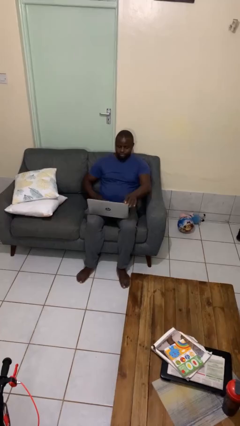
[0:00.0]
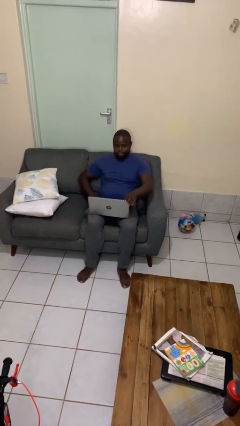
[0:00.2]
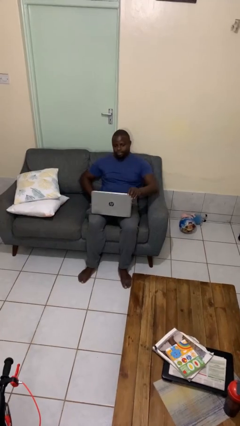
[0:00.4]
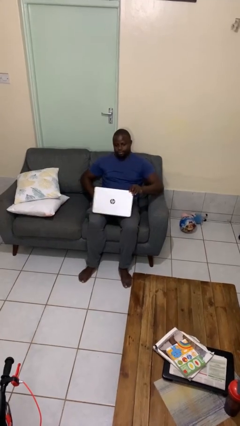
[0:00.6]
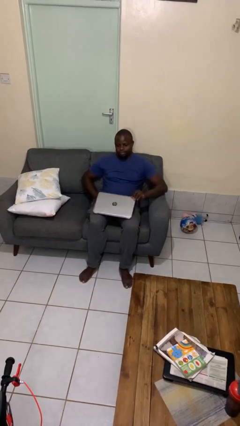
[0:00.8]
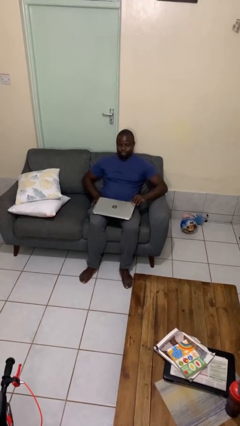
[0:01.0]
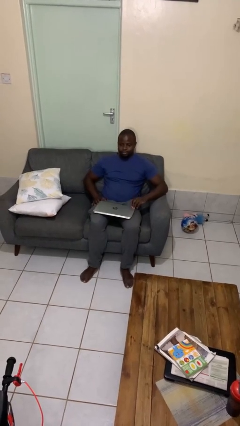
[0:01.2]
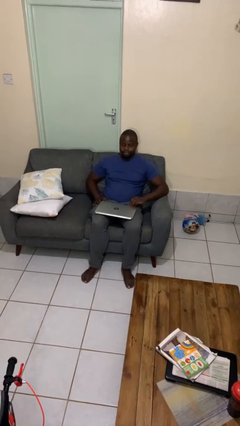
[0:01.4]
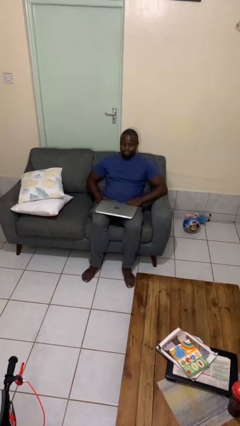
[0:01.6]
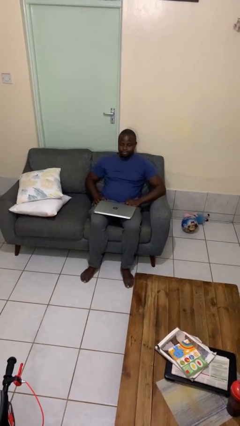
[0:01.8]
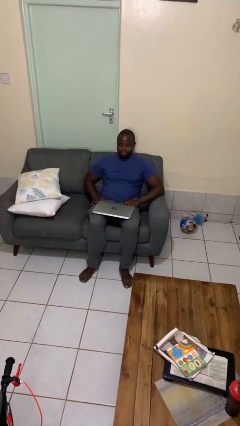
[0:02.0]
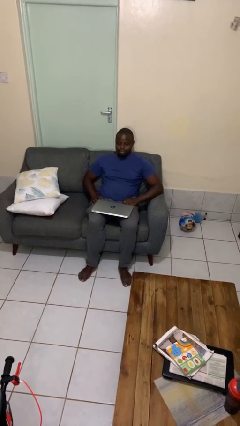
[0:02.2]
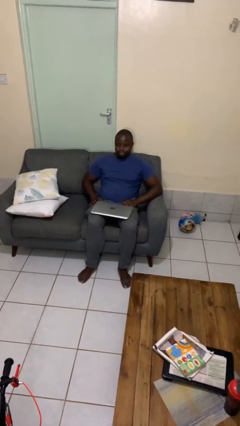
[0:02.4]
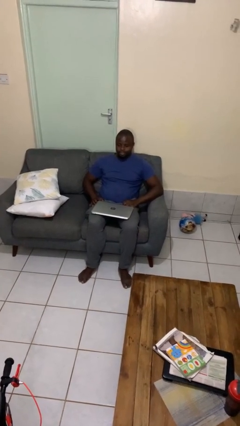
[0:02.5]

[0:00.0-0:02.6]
person closes laptop

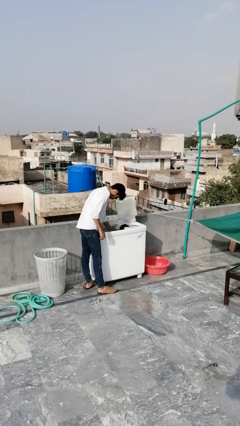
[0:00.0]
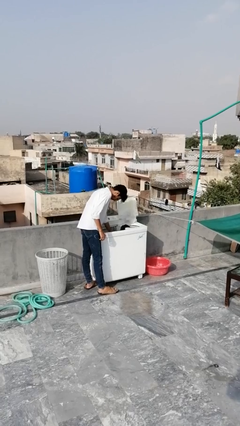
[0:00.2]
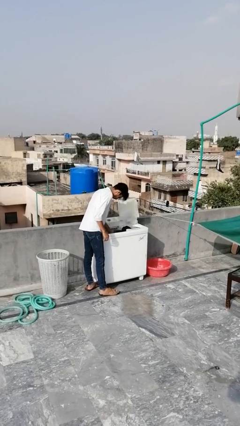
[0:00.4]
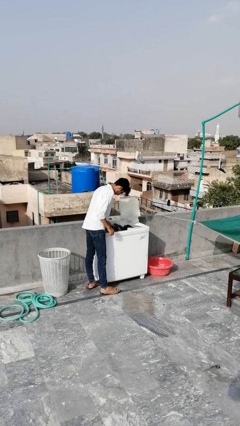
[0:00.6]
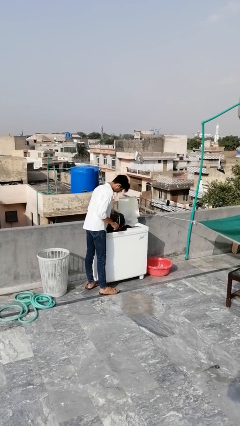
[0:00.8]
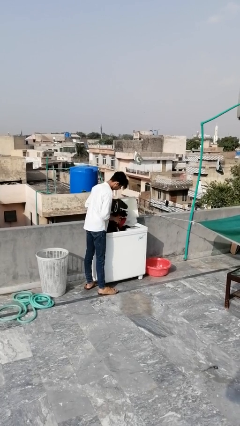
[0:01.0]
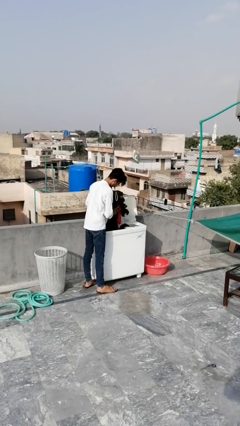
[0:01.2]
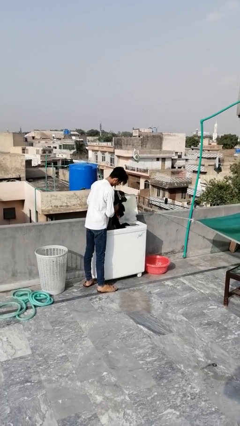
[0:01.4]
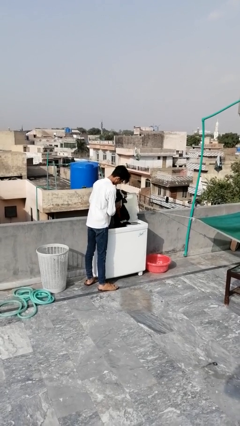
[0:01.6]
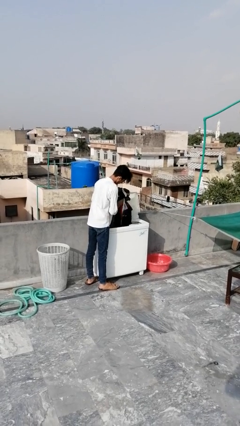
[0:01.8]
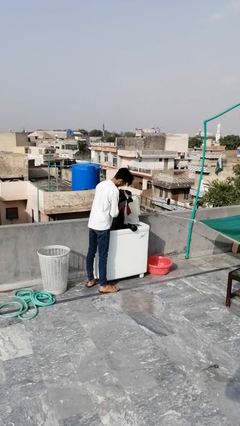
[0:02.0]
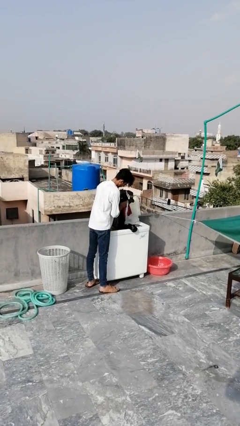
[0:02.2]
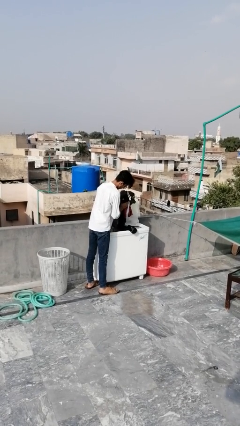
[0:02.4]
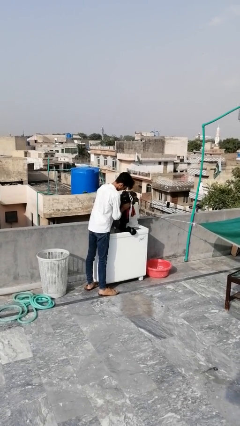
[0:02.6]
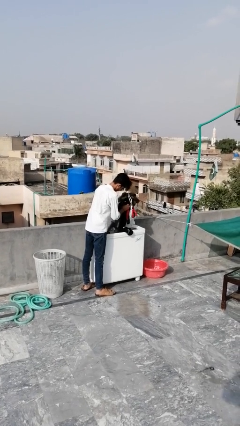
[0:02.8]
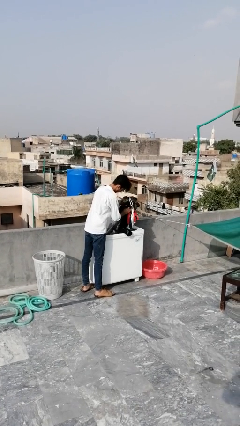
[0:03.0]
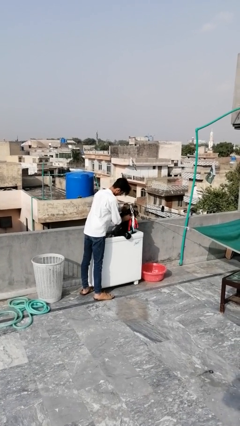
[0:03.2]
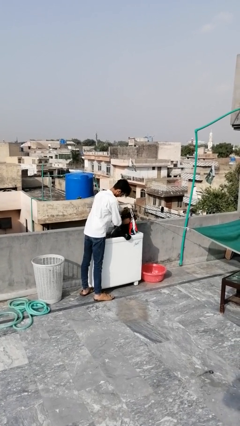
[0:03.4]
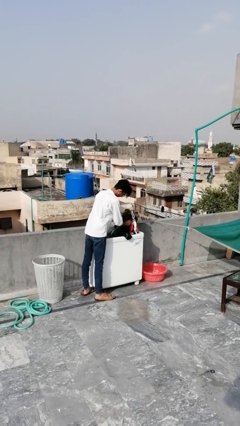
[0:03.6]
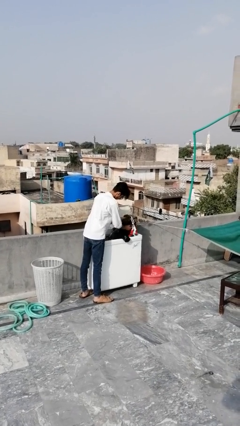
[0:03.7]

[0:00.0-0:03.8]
person unloads clotheswasher

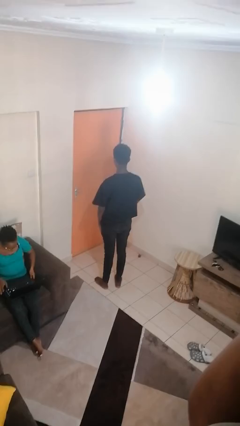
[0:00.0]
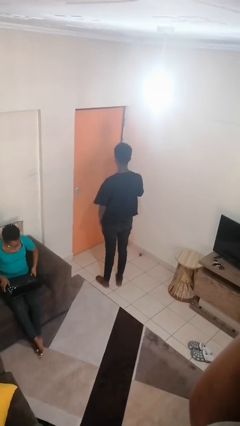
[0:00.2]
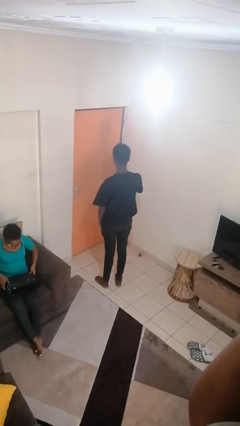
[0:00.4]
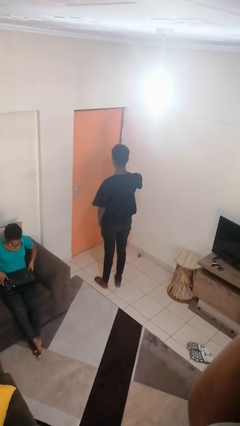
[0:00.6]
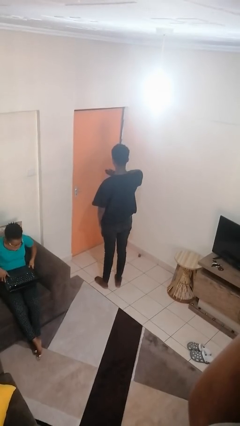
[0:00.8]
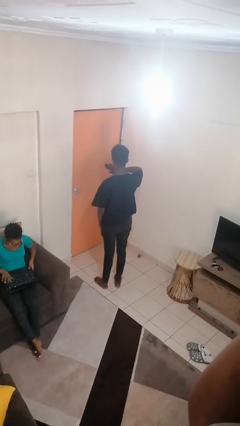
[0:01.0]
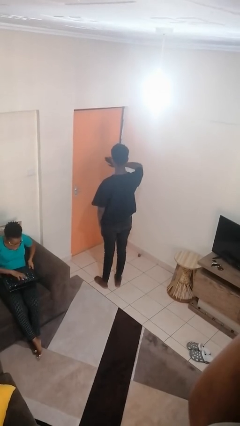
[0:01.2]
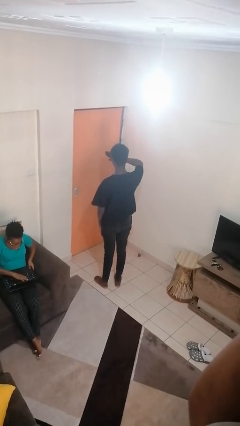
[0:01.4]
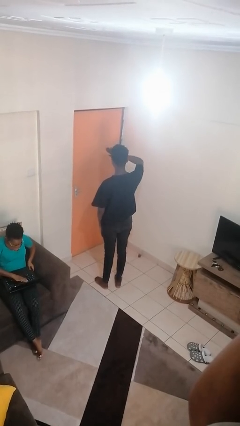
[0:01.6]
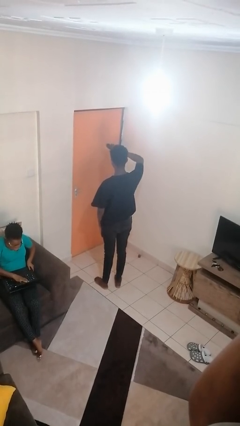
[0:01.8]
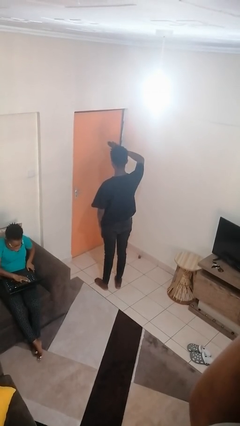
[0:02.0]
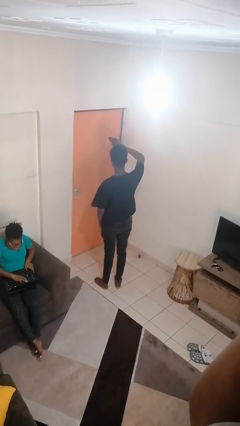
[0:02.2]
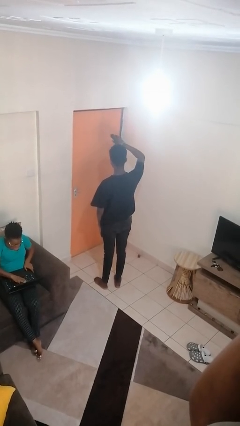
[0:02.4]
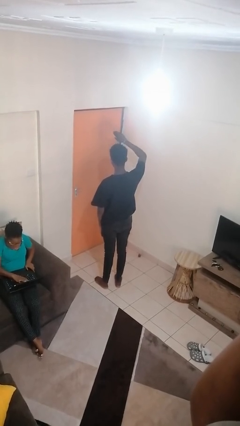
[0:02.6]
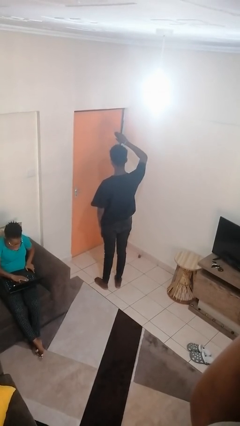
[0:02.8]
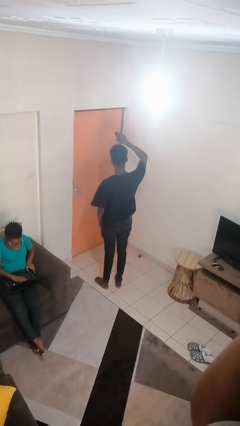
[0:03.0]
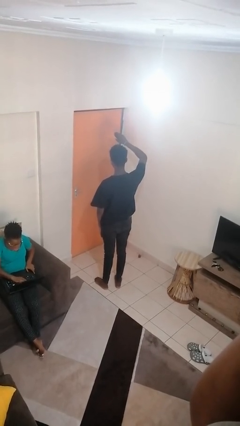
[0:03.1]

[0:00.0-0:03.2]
person gestures swipe up

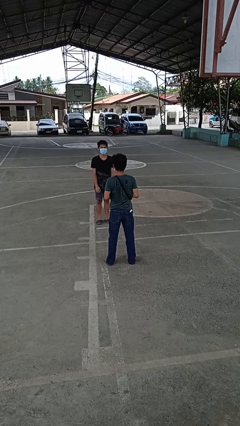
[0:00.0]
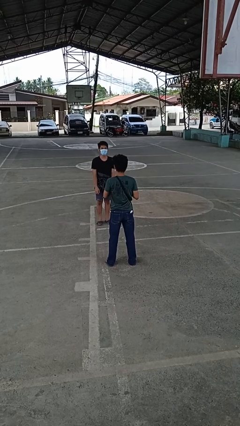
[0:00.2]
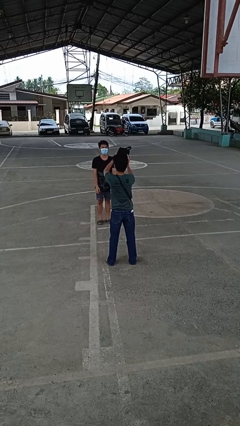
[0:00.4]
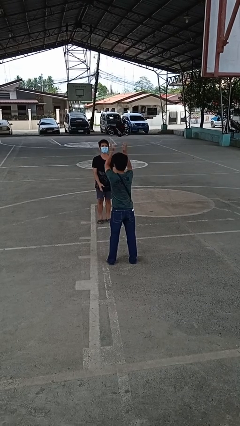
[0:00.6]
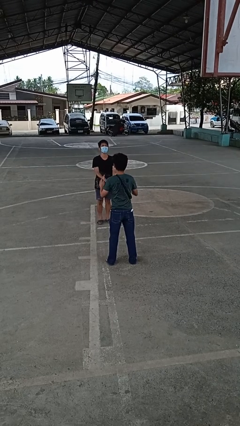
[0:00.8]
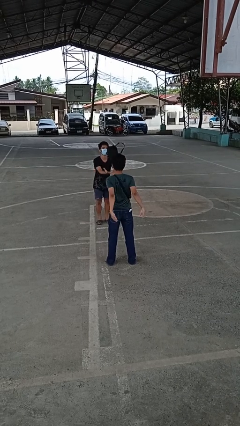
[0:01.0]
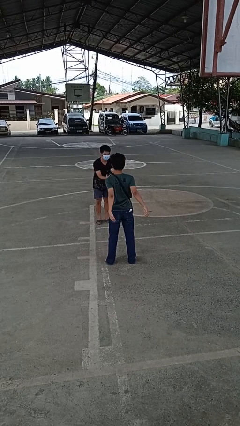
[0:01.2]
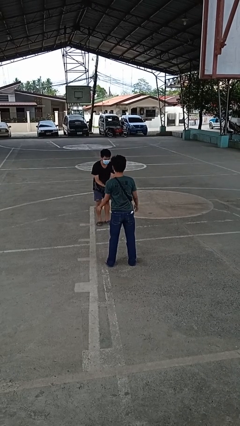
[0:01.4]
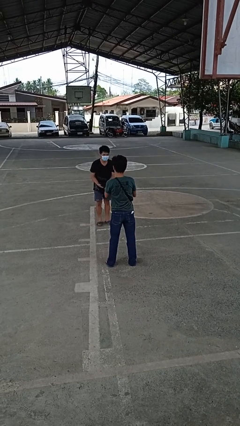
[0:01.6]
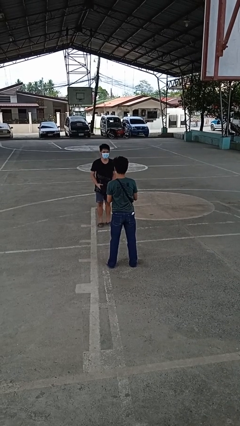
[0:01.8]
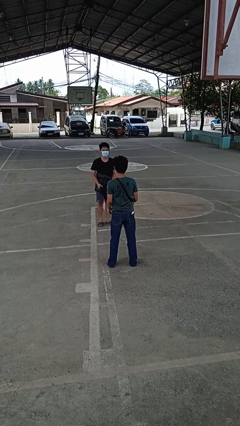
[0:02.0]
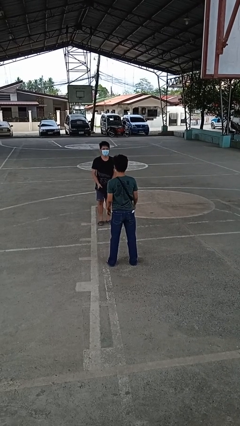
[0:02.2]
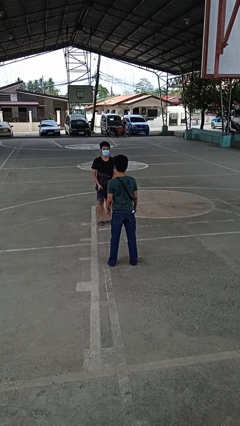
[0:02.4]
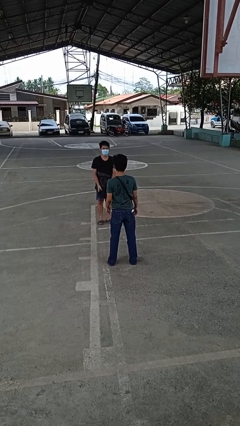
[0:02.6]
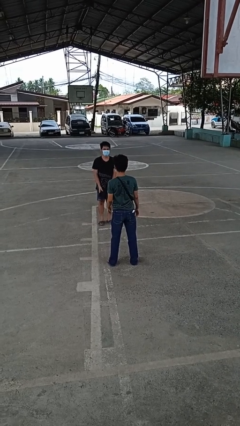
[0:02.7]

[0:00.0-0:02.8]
person throws object to person

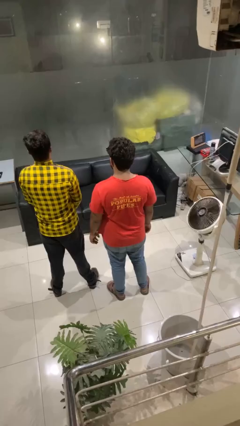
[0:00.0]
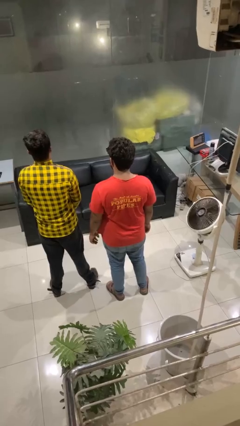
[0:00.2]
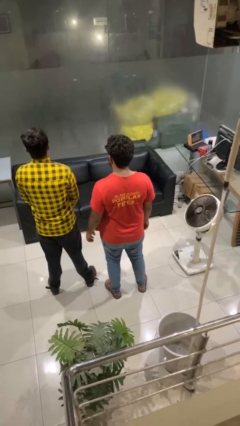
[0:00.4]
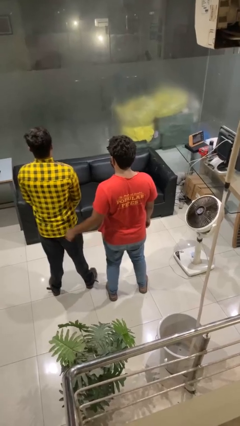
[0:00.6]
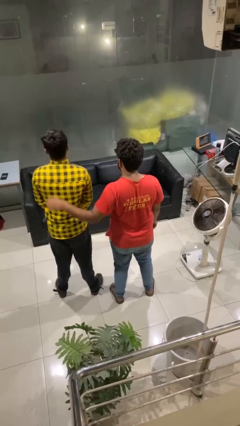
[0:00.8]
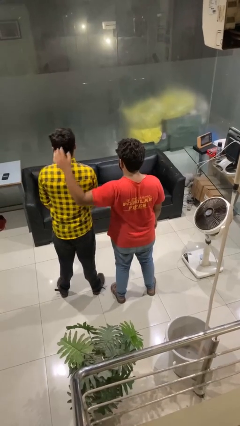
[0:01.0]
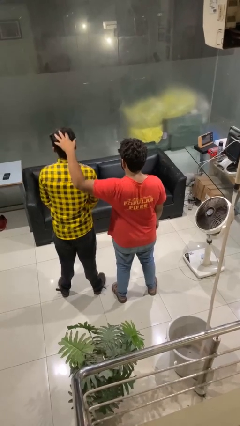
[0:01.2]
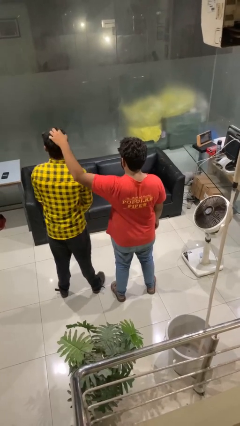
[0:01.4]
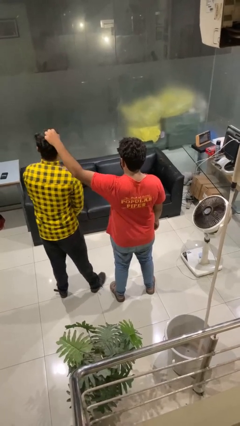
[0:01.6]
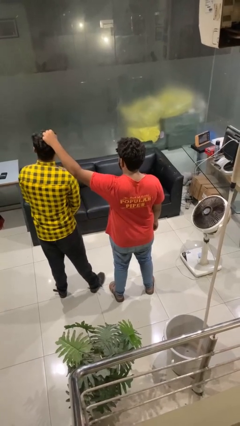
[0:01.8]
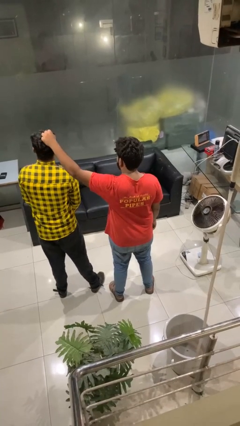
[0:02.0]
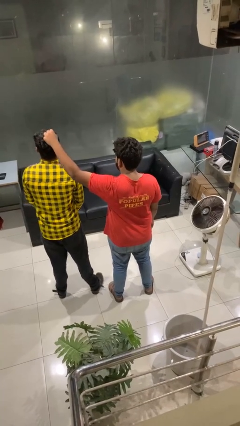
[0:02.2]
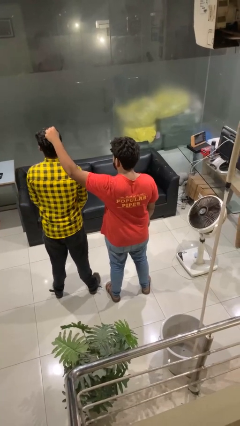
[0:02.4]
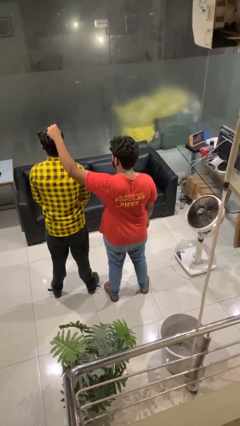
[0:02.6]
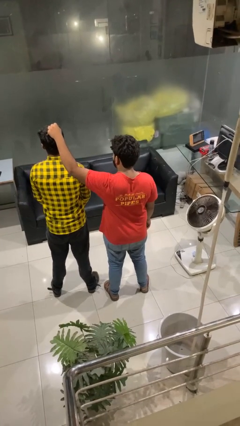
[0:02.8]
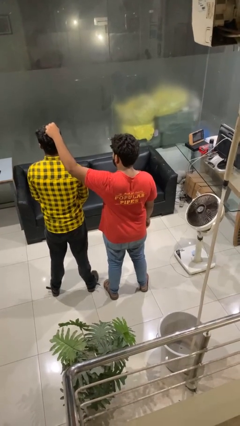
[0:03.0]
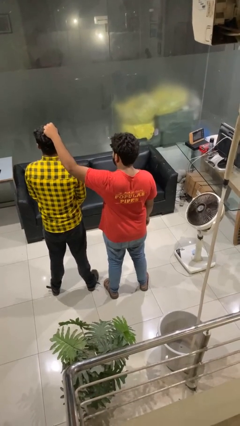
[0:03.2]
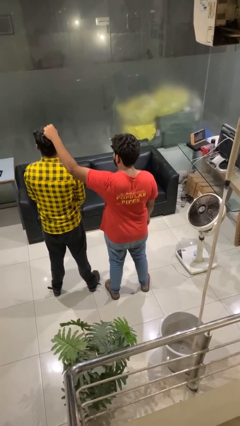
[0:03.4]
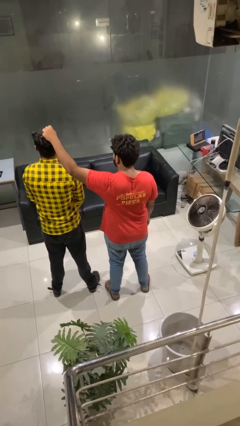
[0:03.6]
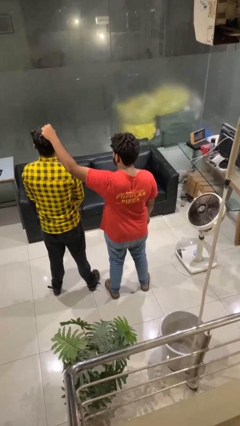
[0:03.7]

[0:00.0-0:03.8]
person grabs person by hair

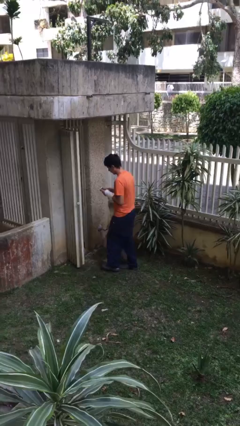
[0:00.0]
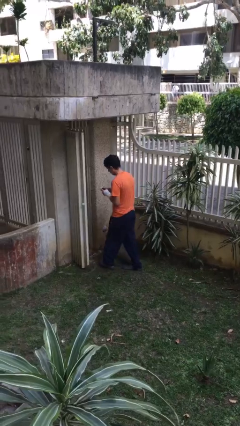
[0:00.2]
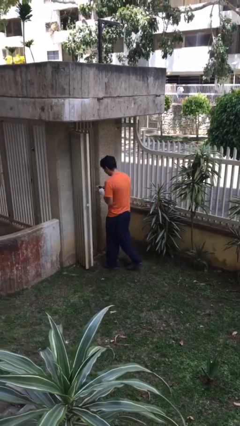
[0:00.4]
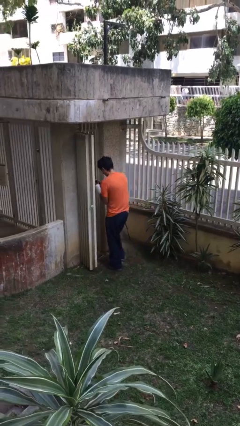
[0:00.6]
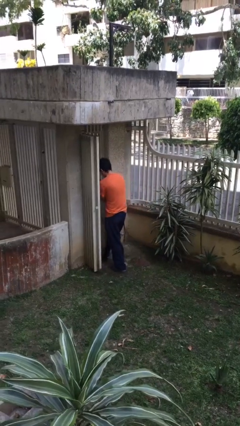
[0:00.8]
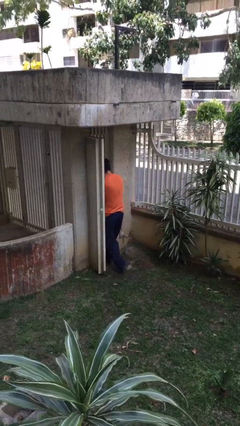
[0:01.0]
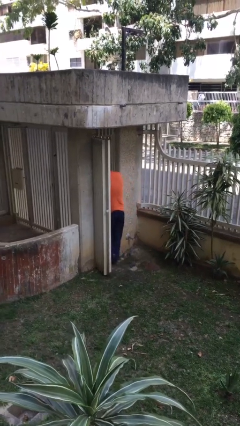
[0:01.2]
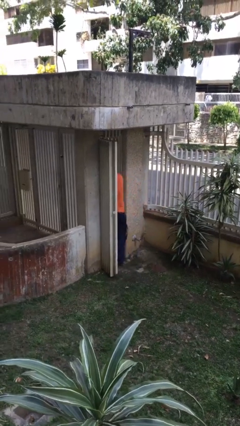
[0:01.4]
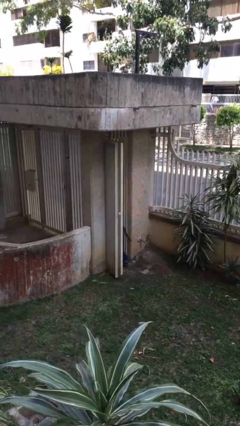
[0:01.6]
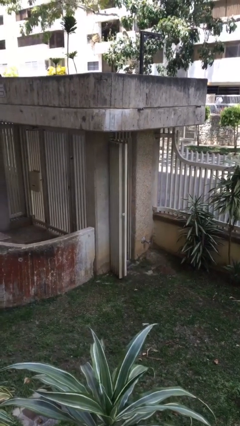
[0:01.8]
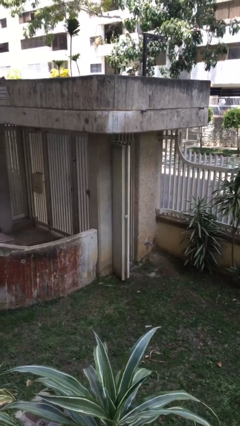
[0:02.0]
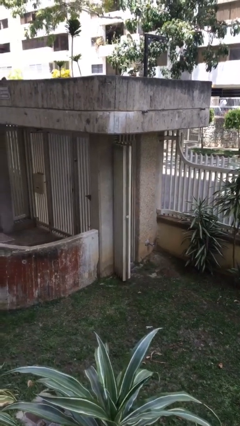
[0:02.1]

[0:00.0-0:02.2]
person exits scene through structure
